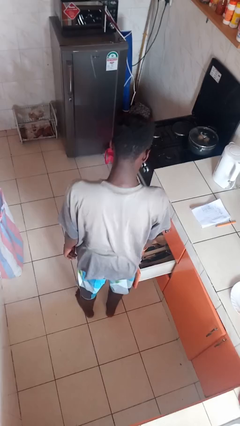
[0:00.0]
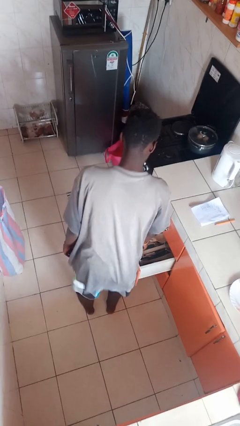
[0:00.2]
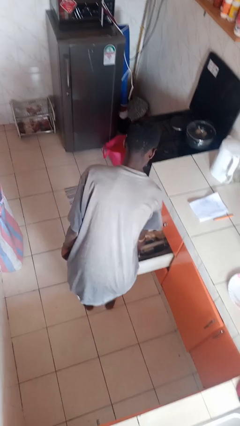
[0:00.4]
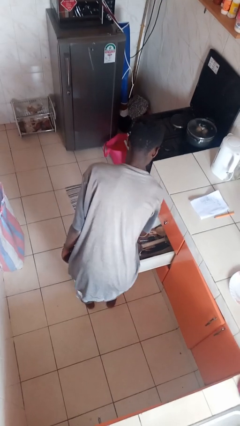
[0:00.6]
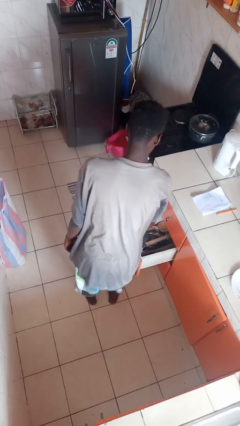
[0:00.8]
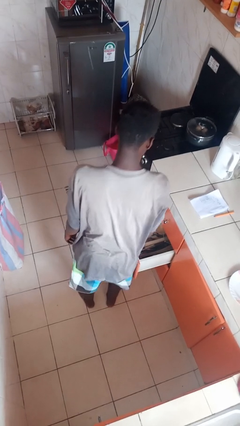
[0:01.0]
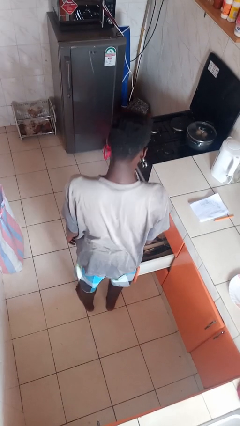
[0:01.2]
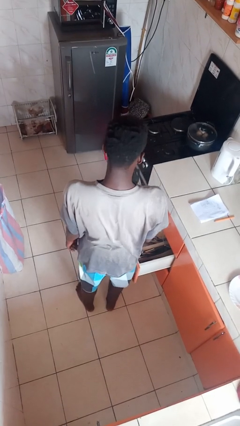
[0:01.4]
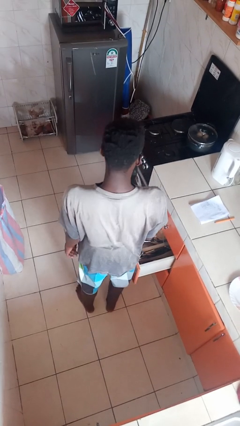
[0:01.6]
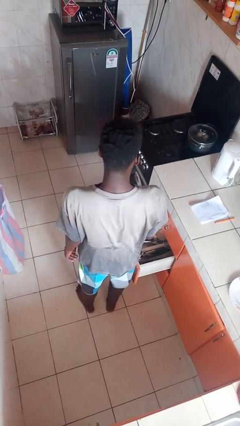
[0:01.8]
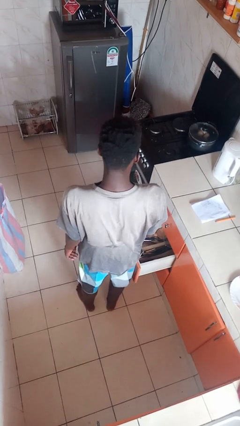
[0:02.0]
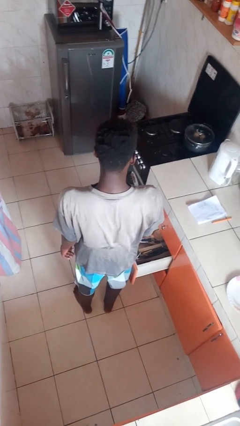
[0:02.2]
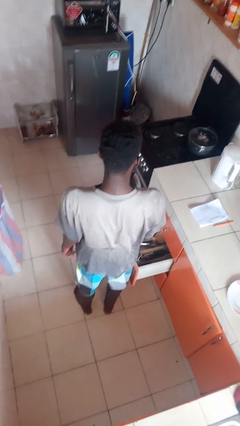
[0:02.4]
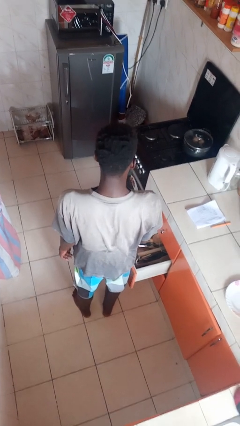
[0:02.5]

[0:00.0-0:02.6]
person takes object from kitchen drawer

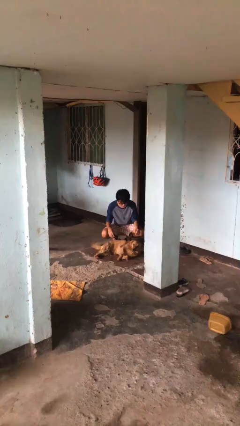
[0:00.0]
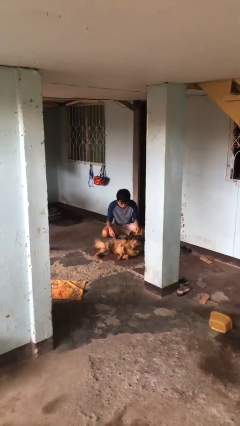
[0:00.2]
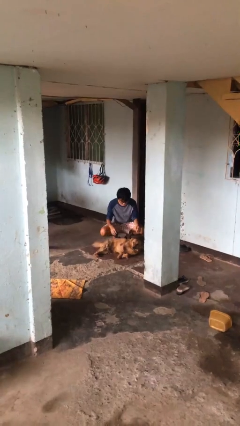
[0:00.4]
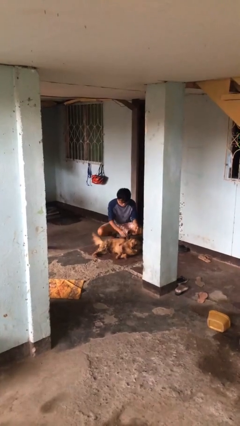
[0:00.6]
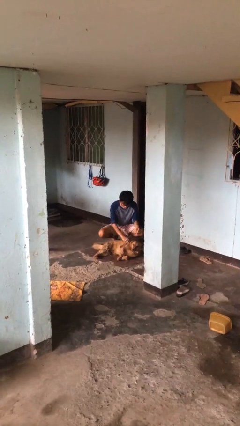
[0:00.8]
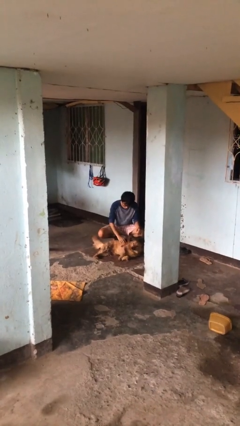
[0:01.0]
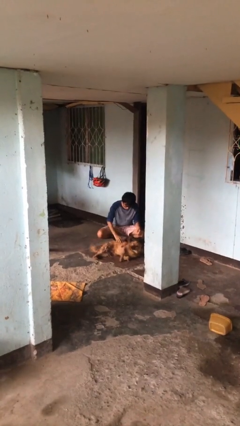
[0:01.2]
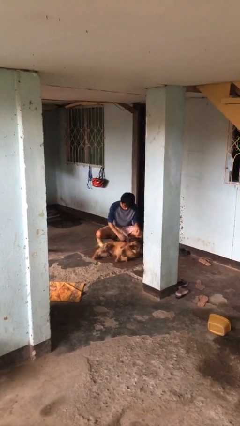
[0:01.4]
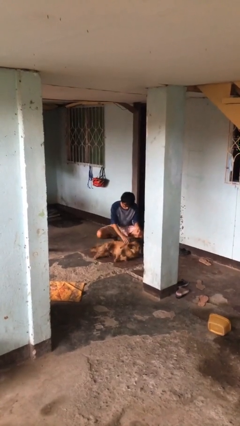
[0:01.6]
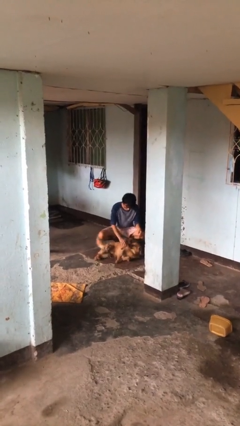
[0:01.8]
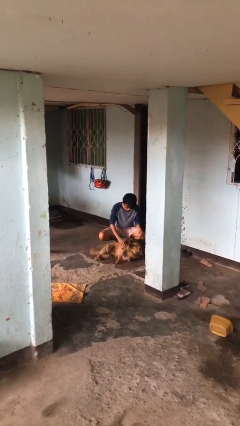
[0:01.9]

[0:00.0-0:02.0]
person pets dog

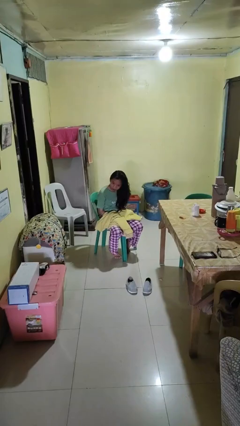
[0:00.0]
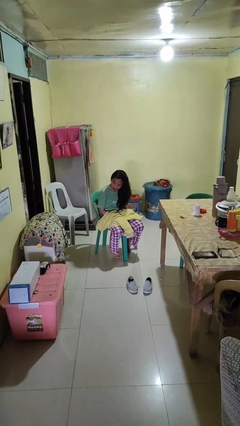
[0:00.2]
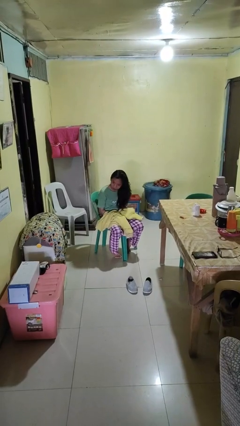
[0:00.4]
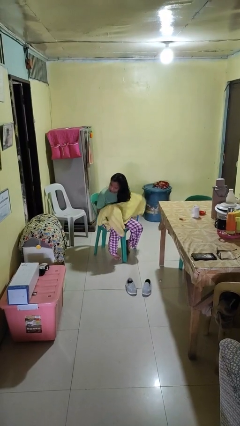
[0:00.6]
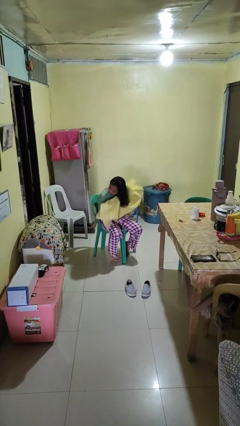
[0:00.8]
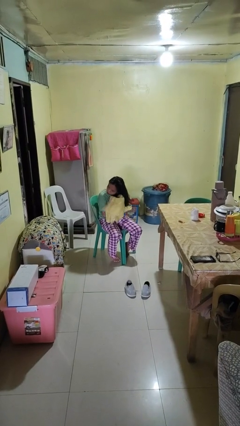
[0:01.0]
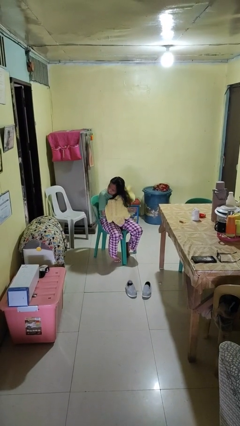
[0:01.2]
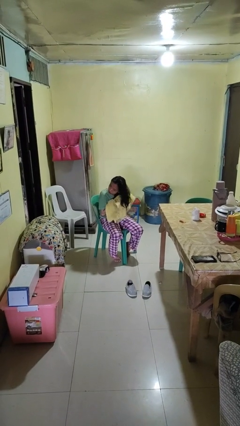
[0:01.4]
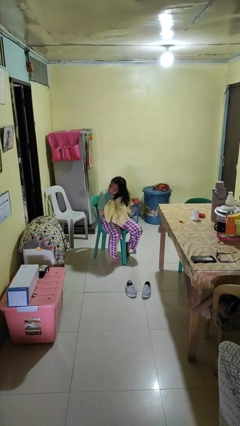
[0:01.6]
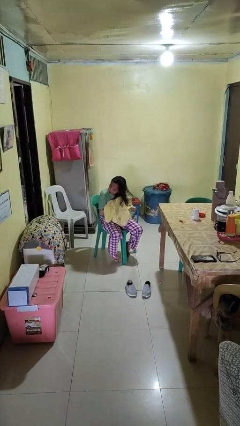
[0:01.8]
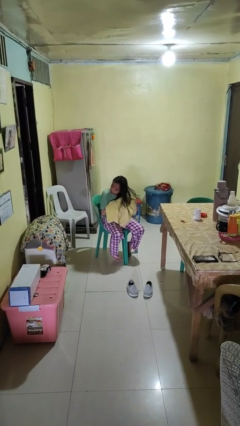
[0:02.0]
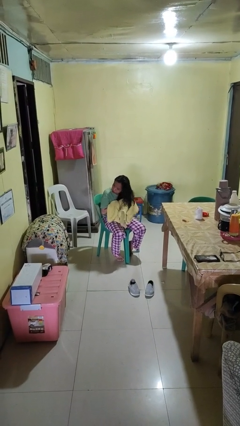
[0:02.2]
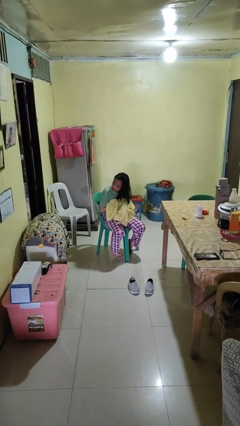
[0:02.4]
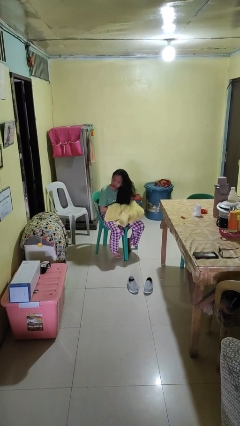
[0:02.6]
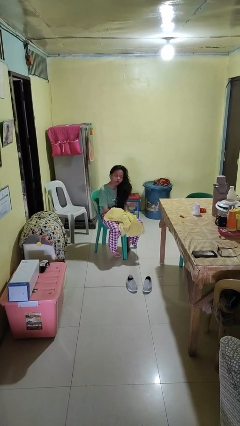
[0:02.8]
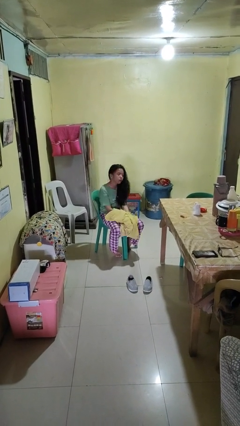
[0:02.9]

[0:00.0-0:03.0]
person dries hair with towel

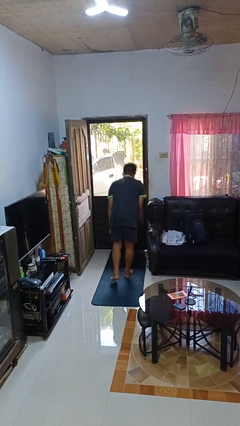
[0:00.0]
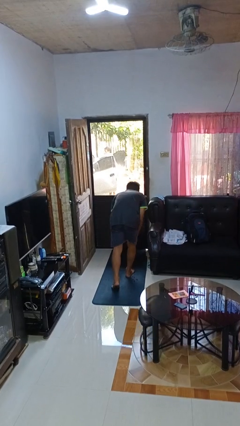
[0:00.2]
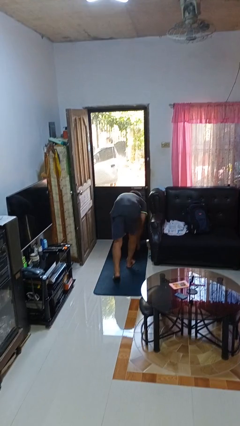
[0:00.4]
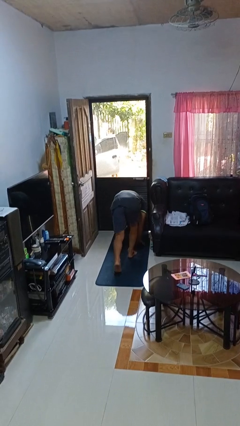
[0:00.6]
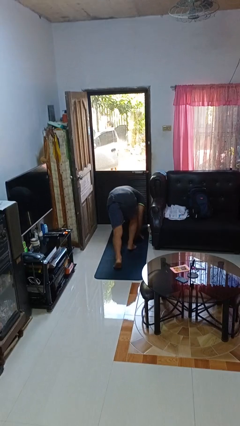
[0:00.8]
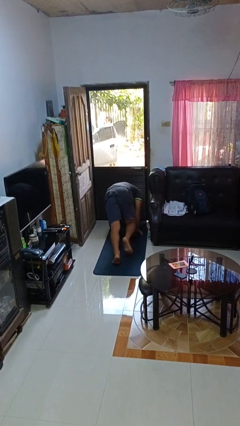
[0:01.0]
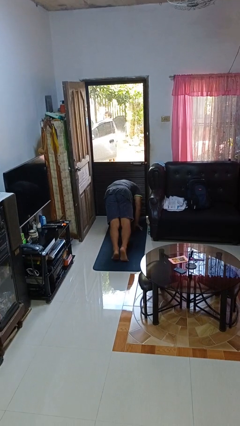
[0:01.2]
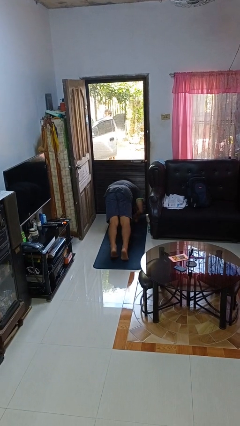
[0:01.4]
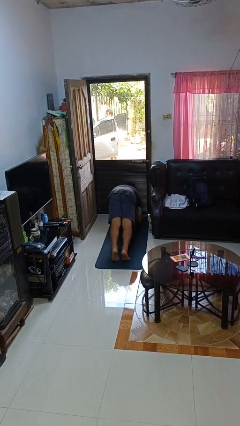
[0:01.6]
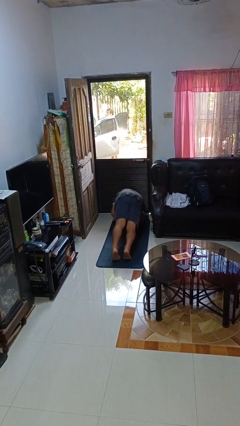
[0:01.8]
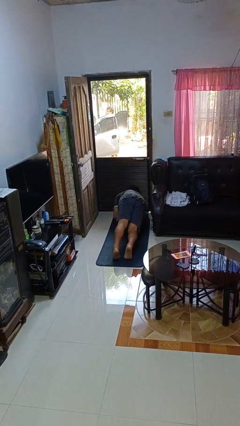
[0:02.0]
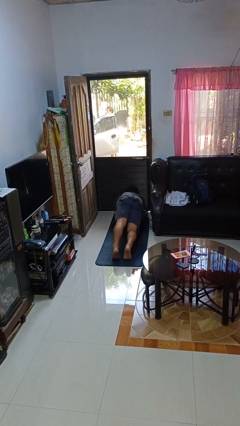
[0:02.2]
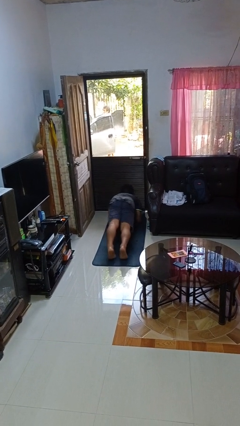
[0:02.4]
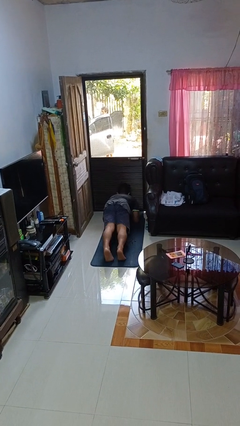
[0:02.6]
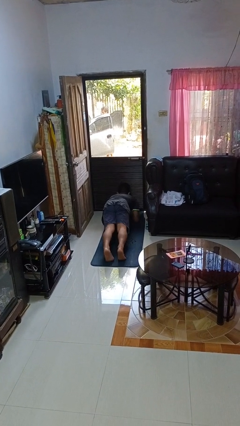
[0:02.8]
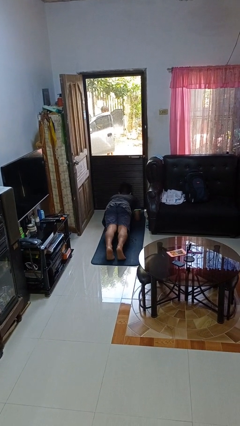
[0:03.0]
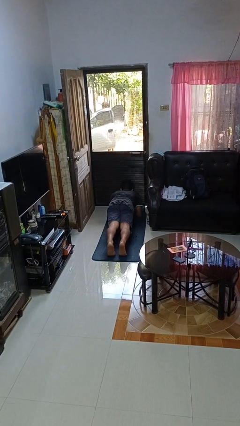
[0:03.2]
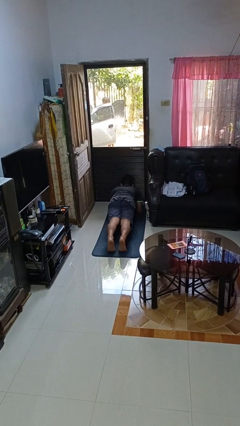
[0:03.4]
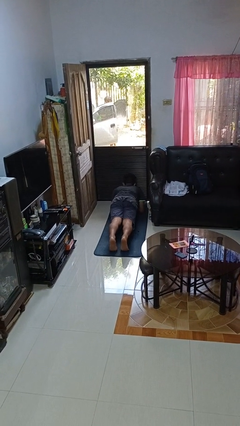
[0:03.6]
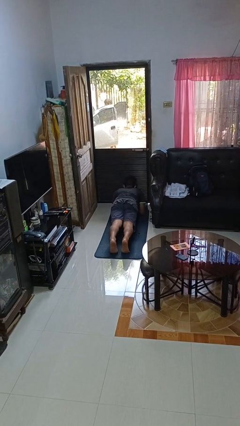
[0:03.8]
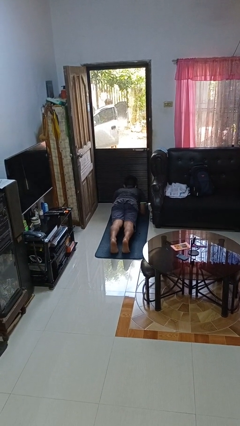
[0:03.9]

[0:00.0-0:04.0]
person exercises with plank

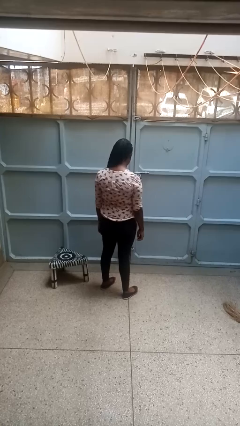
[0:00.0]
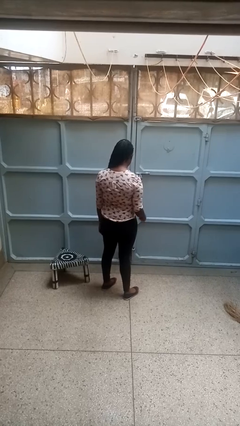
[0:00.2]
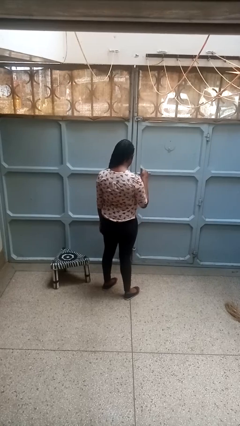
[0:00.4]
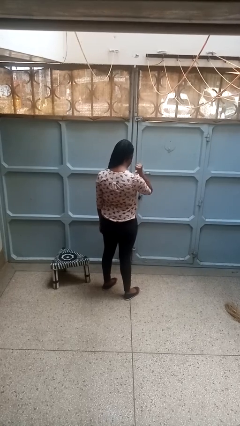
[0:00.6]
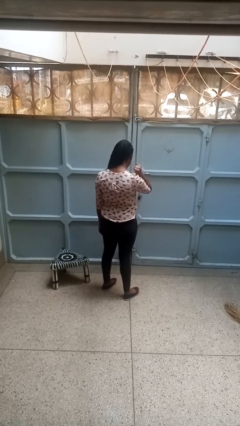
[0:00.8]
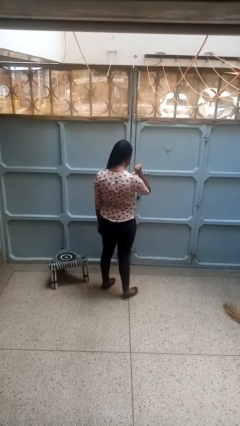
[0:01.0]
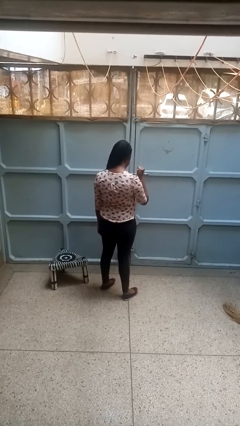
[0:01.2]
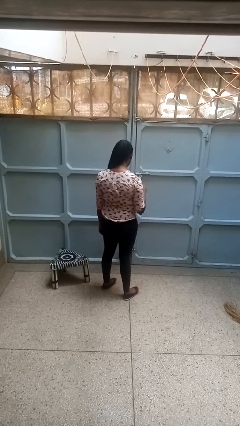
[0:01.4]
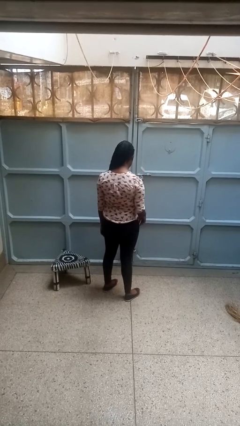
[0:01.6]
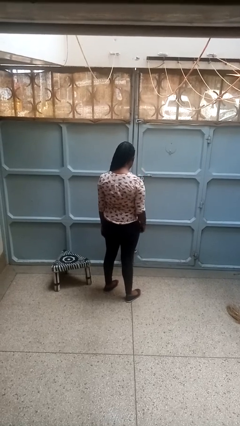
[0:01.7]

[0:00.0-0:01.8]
person gestures behind me

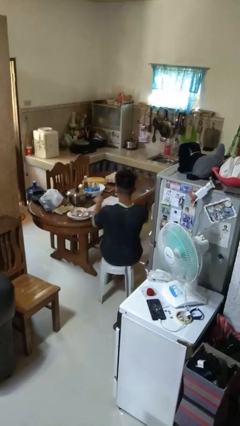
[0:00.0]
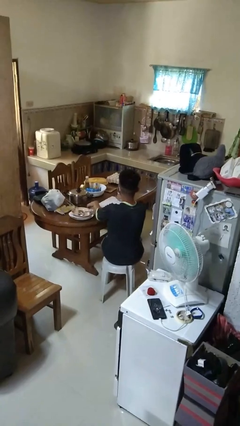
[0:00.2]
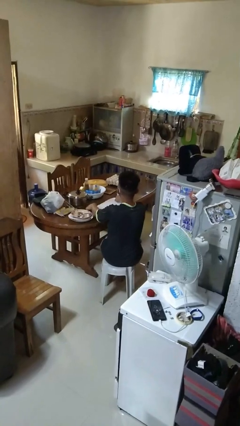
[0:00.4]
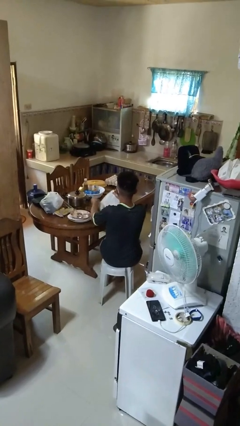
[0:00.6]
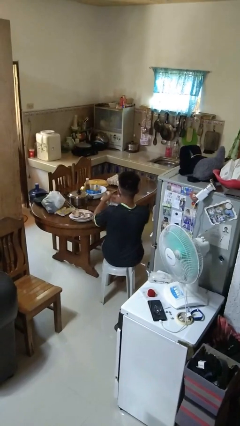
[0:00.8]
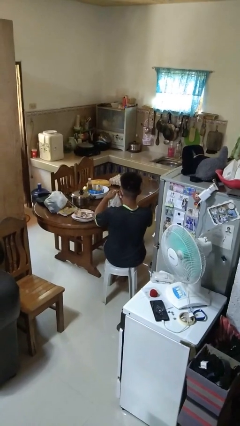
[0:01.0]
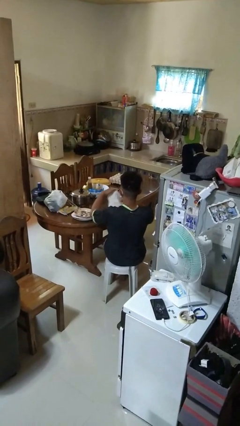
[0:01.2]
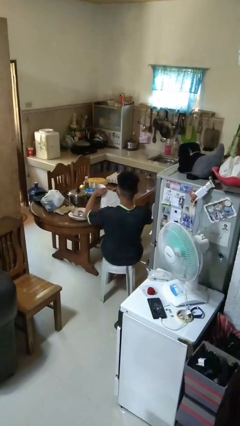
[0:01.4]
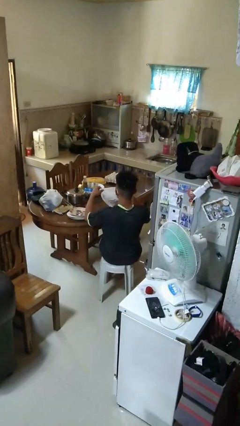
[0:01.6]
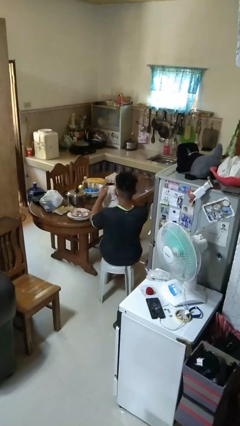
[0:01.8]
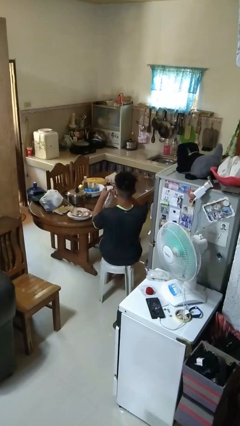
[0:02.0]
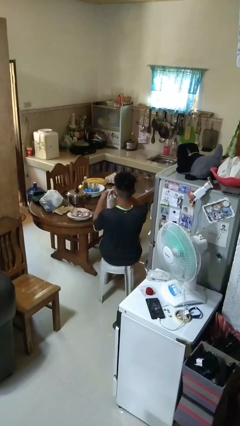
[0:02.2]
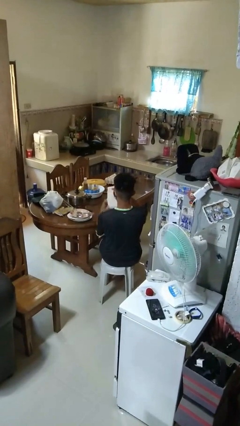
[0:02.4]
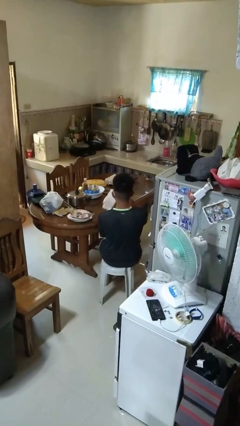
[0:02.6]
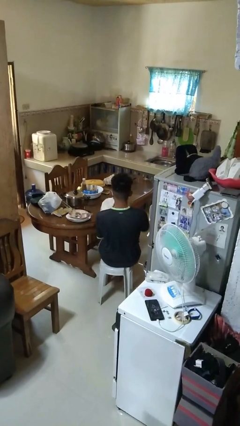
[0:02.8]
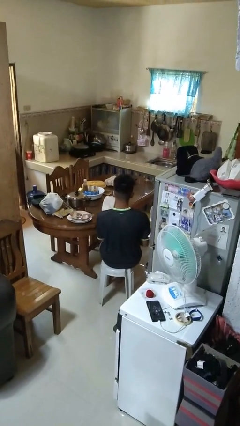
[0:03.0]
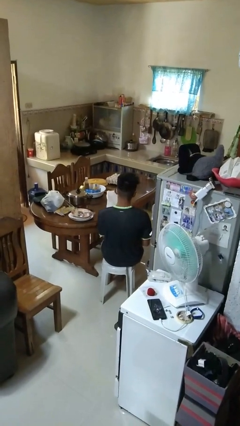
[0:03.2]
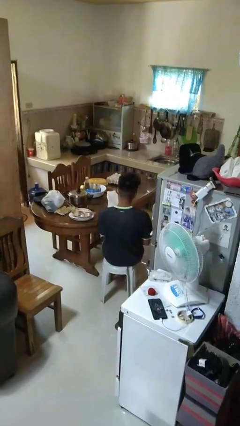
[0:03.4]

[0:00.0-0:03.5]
person folds tablecloth

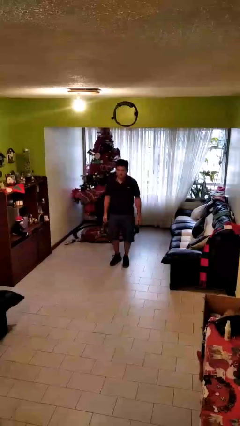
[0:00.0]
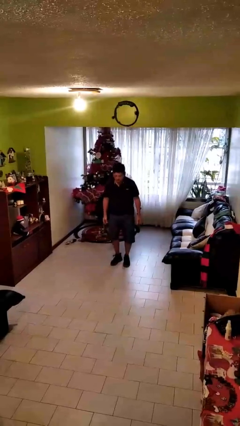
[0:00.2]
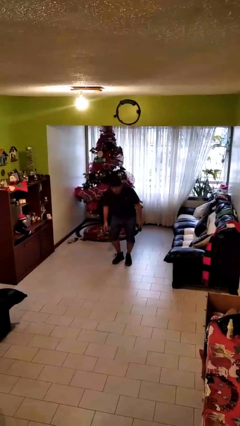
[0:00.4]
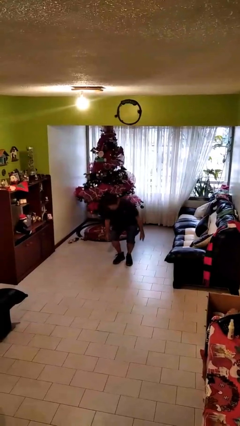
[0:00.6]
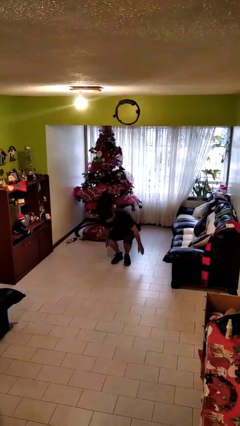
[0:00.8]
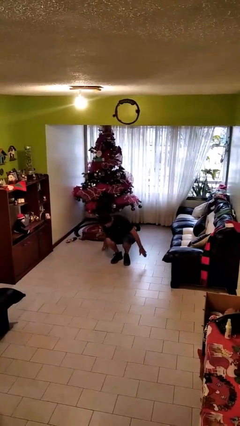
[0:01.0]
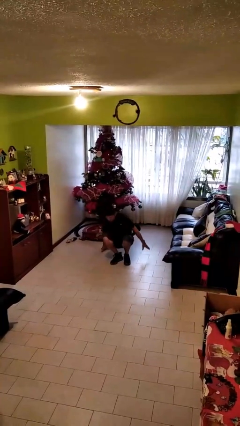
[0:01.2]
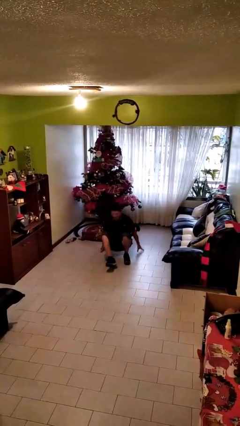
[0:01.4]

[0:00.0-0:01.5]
person sits down
